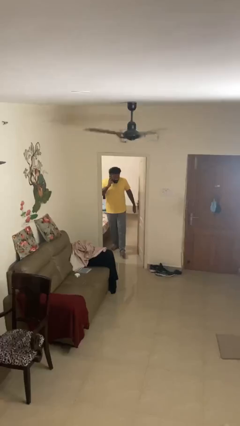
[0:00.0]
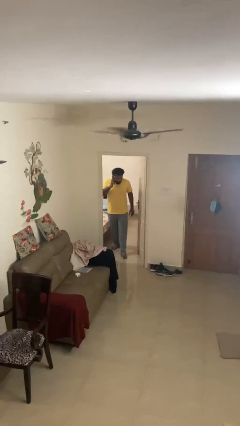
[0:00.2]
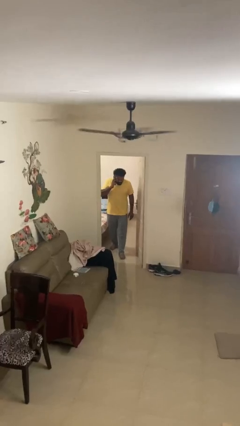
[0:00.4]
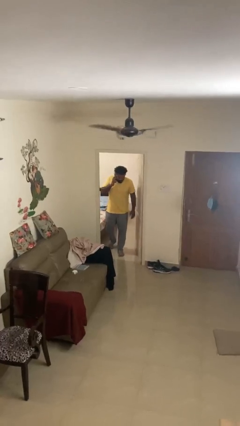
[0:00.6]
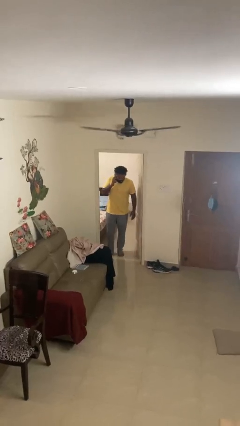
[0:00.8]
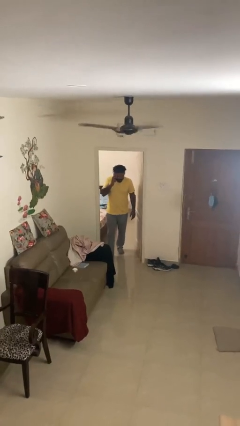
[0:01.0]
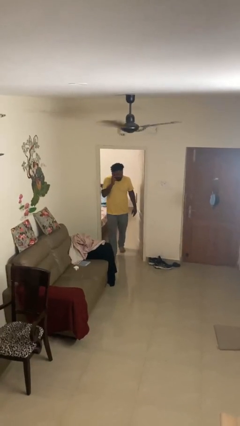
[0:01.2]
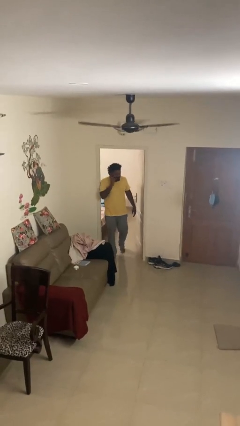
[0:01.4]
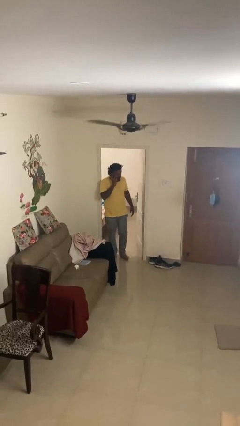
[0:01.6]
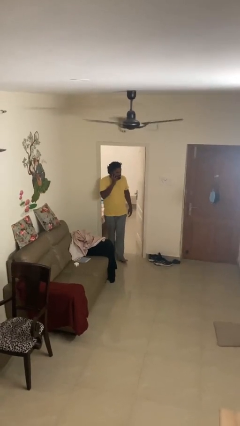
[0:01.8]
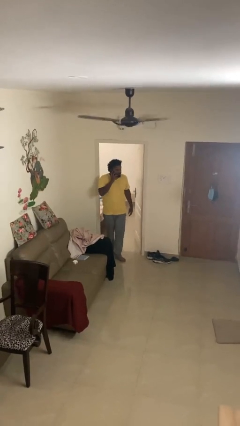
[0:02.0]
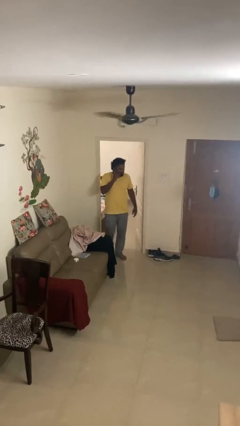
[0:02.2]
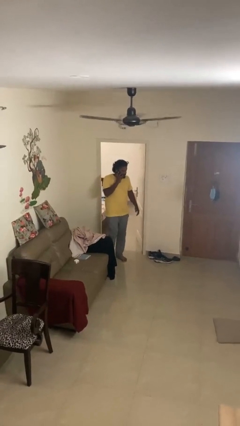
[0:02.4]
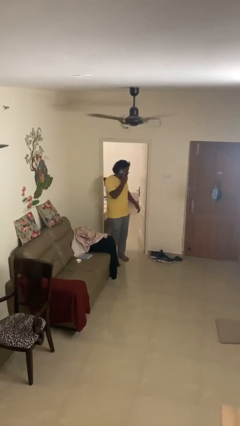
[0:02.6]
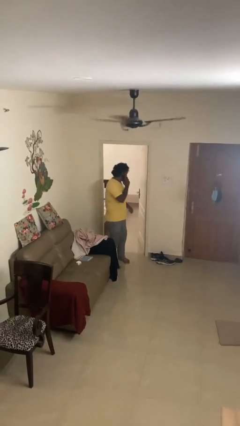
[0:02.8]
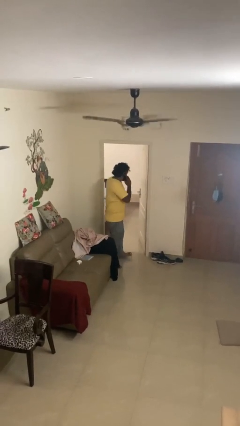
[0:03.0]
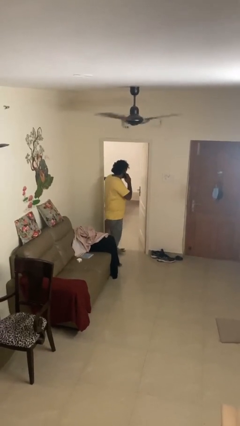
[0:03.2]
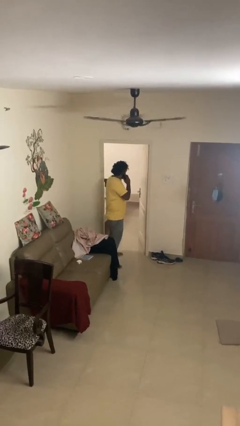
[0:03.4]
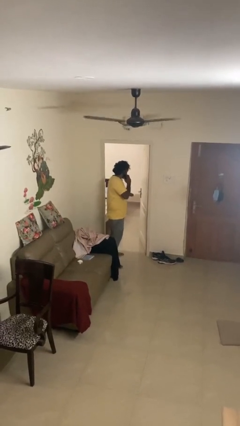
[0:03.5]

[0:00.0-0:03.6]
person enters scene through structure

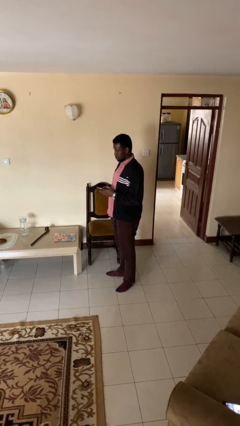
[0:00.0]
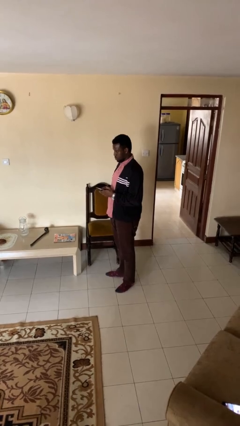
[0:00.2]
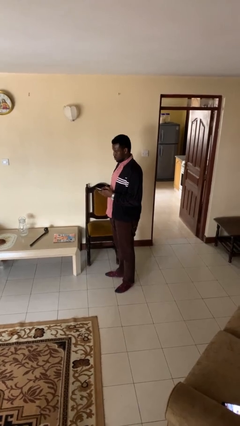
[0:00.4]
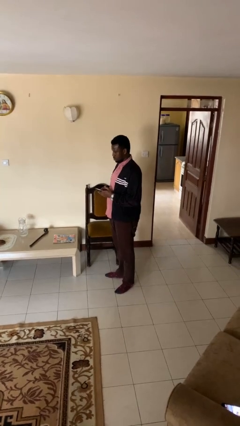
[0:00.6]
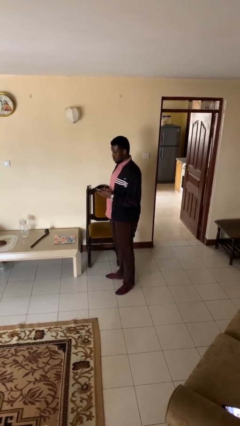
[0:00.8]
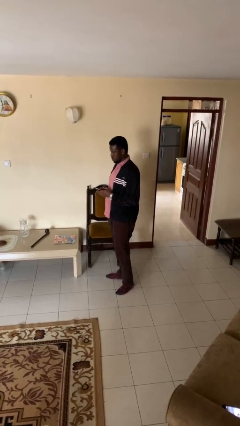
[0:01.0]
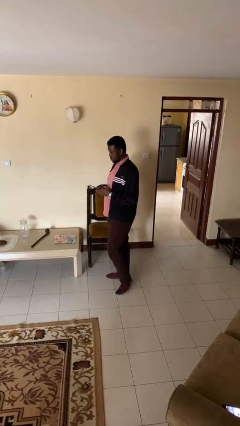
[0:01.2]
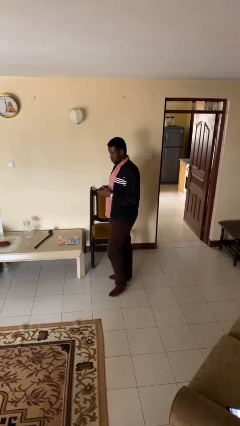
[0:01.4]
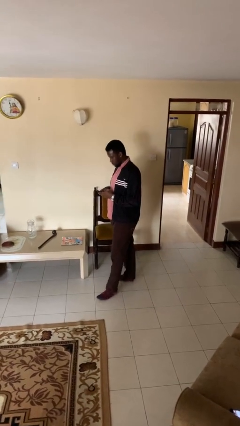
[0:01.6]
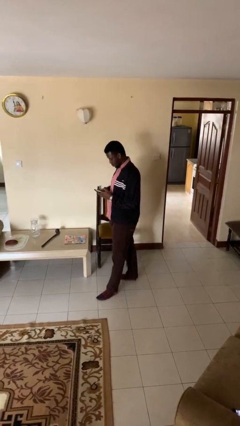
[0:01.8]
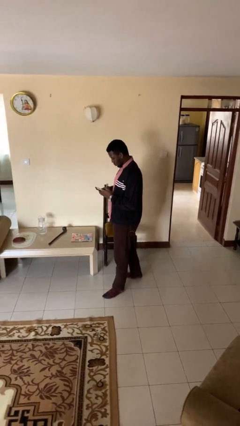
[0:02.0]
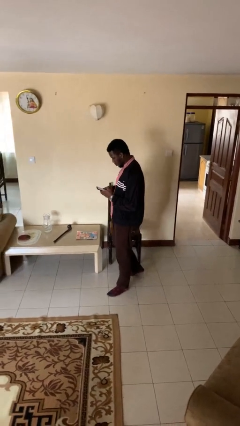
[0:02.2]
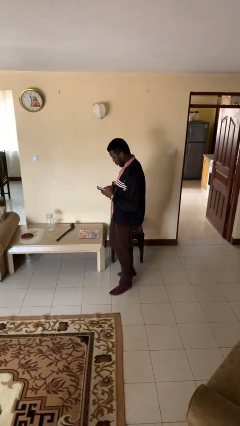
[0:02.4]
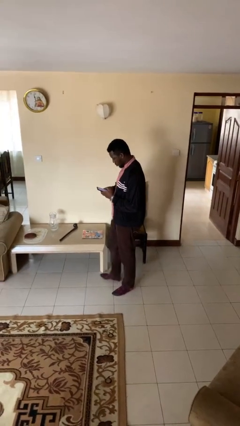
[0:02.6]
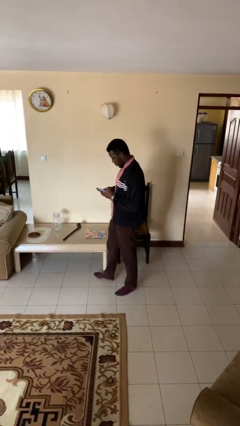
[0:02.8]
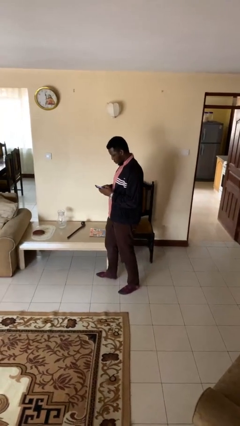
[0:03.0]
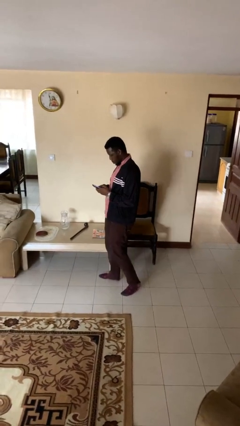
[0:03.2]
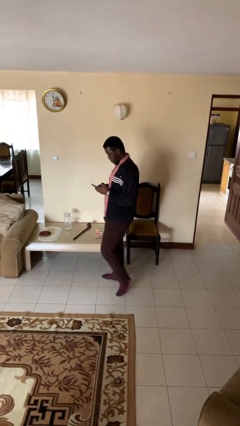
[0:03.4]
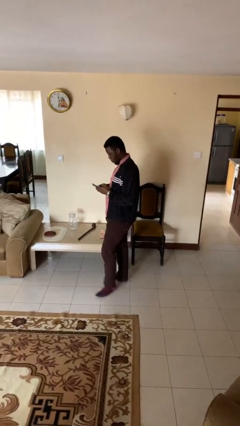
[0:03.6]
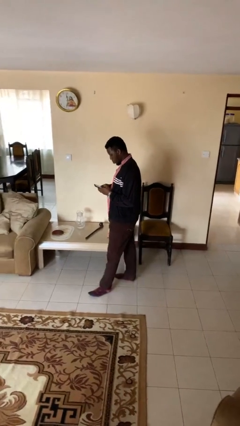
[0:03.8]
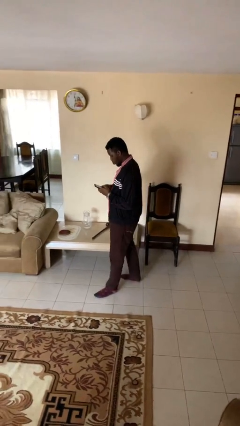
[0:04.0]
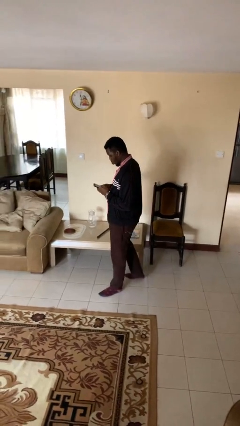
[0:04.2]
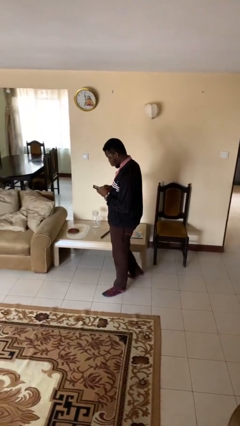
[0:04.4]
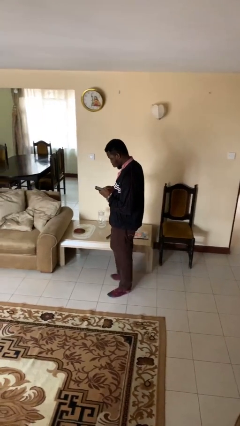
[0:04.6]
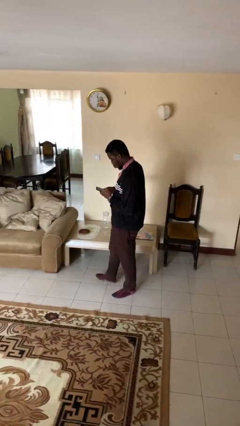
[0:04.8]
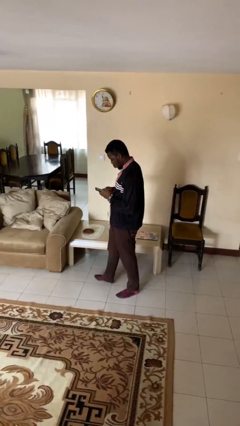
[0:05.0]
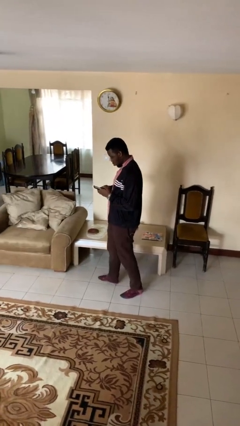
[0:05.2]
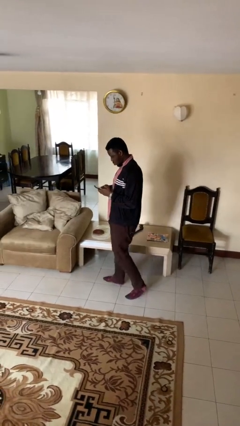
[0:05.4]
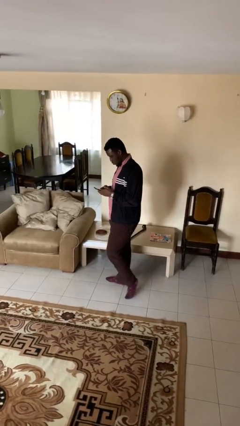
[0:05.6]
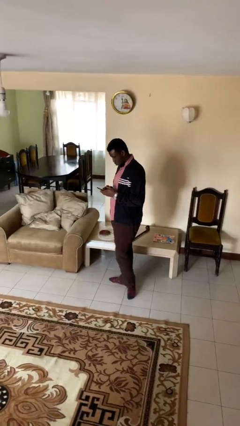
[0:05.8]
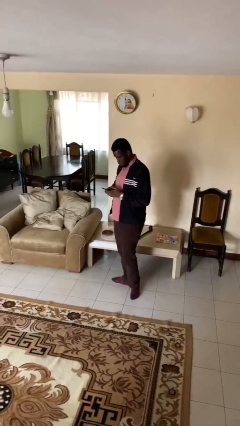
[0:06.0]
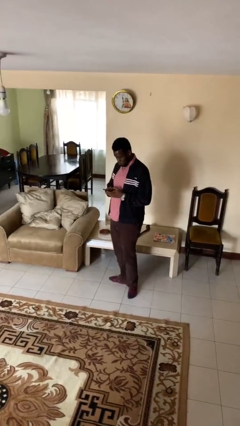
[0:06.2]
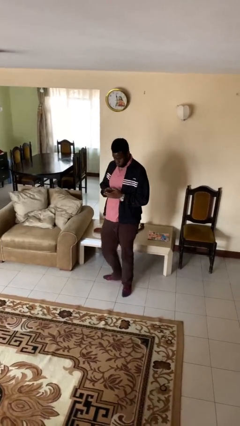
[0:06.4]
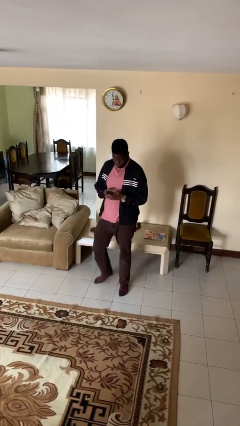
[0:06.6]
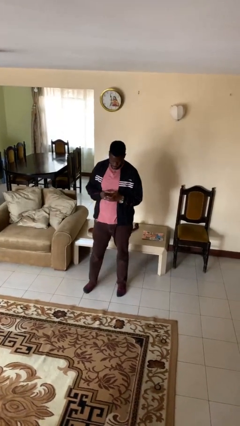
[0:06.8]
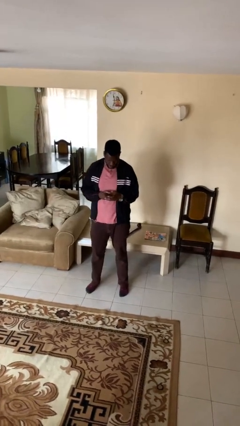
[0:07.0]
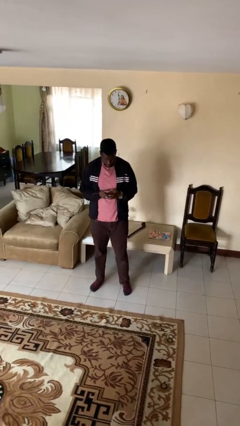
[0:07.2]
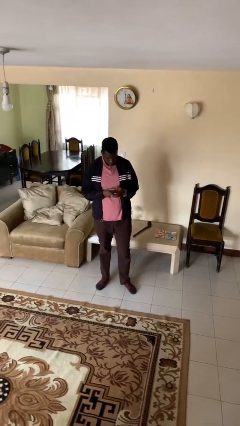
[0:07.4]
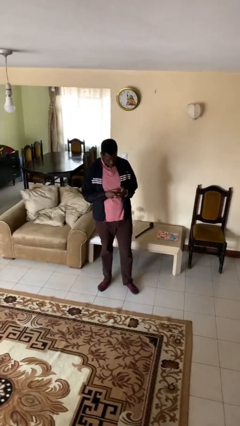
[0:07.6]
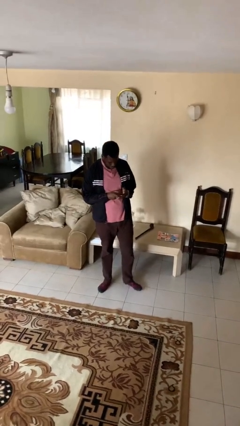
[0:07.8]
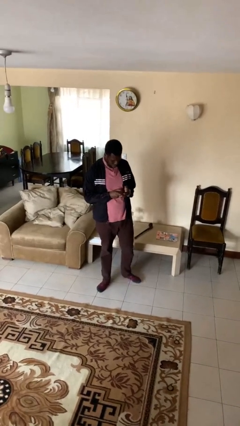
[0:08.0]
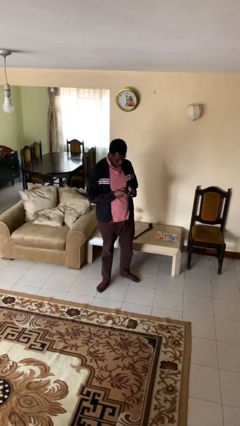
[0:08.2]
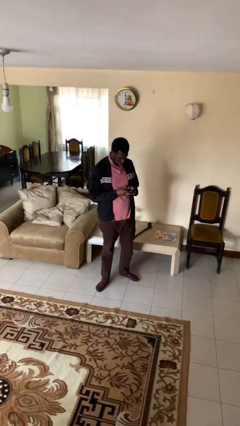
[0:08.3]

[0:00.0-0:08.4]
person texts on phone

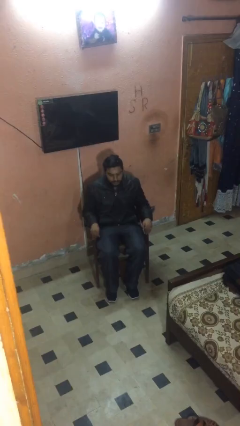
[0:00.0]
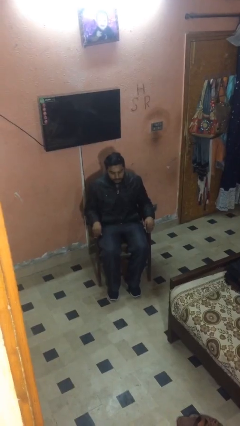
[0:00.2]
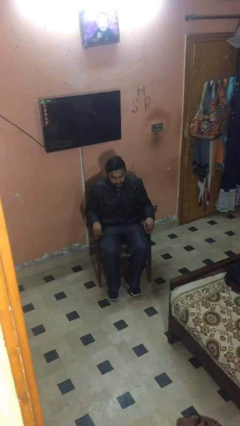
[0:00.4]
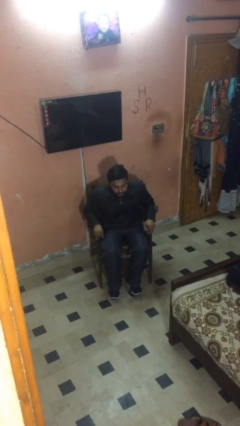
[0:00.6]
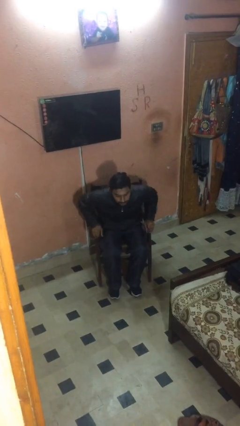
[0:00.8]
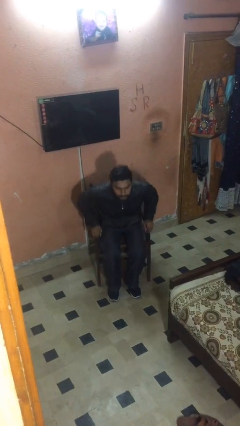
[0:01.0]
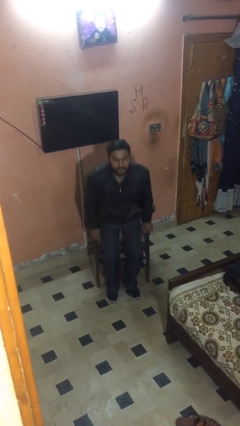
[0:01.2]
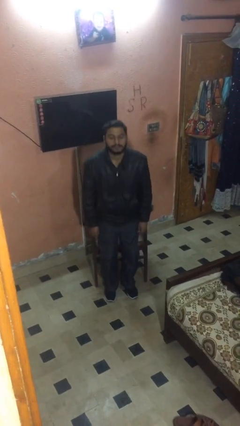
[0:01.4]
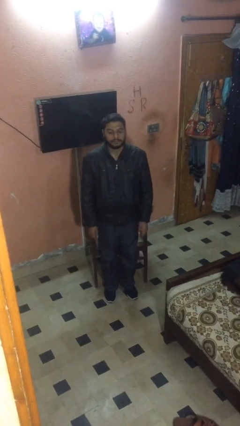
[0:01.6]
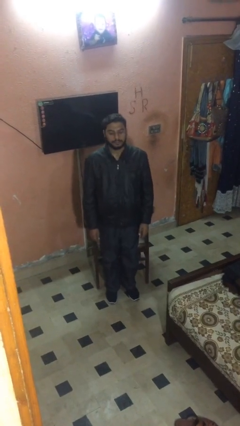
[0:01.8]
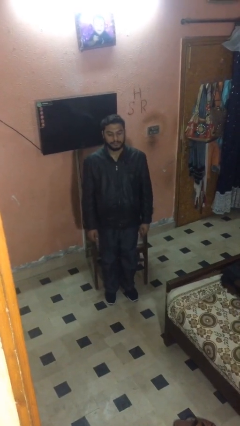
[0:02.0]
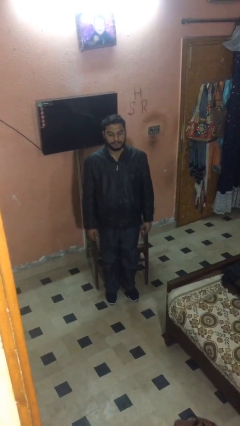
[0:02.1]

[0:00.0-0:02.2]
person stands up

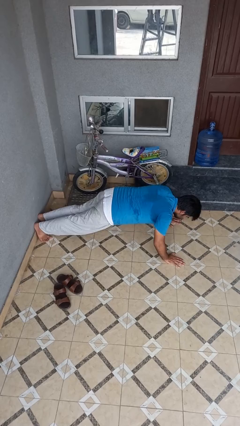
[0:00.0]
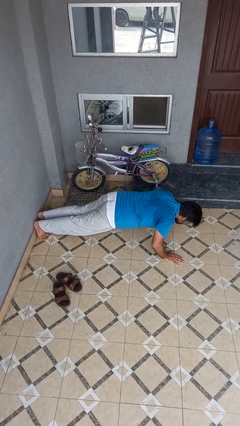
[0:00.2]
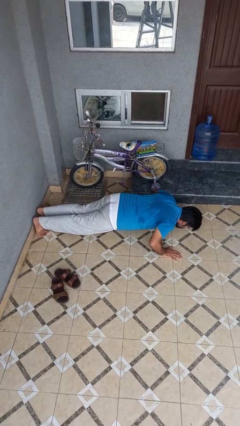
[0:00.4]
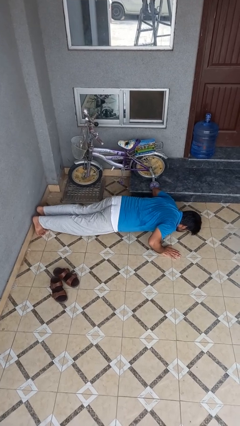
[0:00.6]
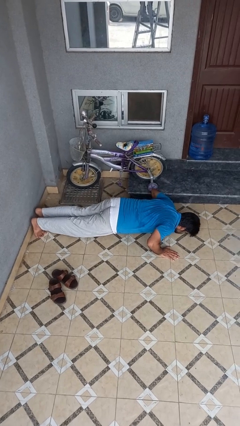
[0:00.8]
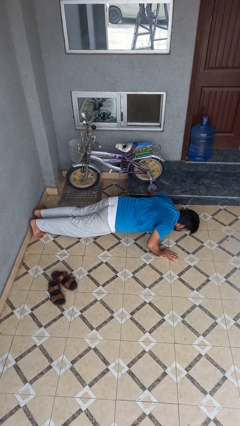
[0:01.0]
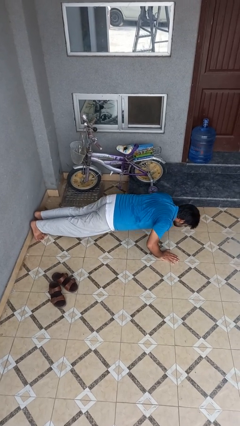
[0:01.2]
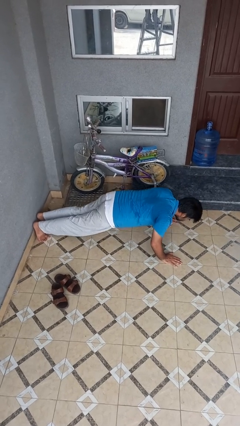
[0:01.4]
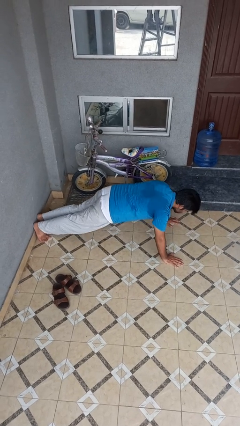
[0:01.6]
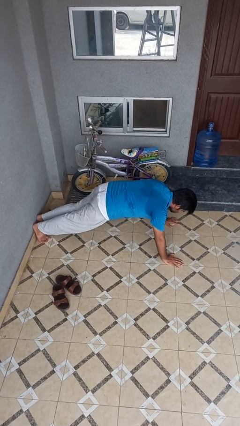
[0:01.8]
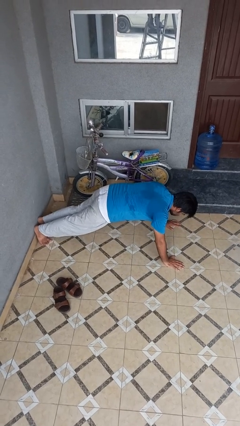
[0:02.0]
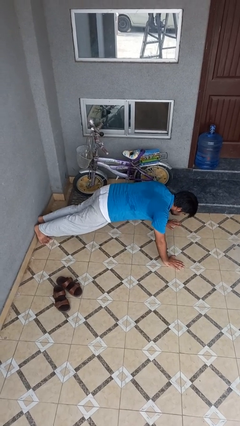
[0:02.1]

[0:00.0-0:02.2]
person exercises with pushup

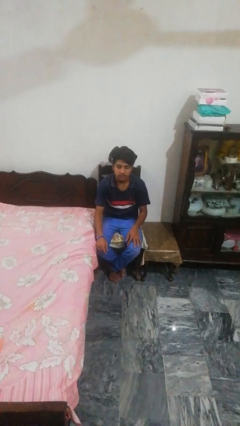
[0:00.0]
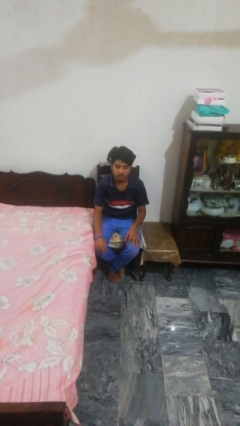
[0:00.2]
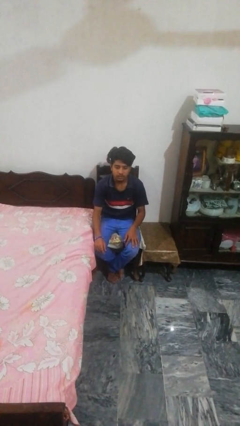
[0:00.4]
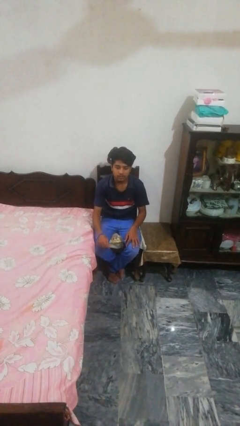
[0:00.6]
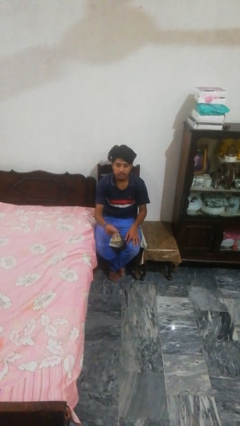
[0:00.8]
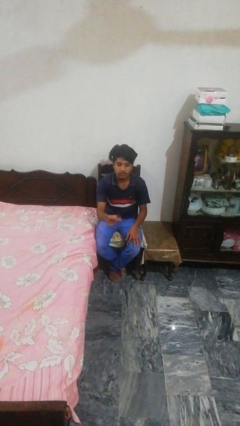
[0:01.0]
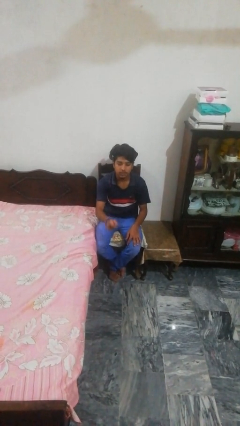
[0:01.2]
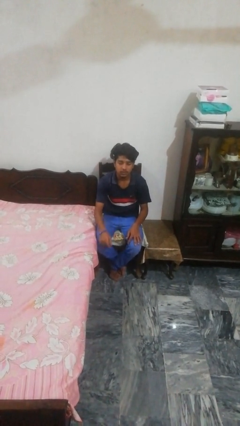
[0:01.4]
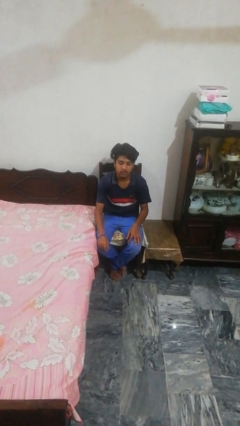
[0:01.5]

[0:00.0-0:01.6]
person snaps fingers
